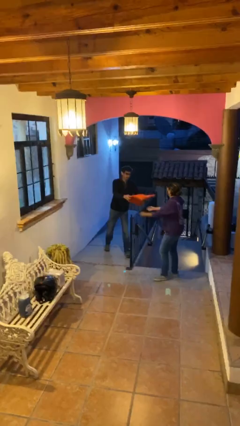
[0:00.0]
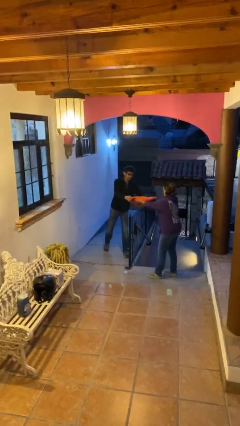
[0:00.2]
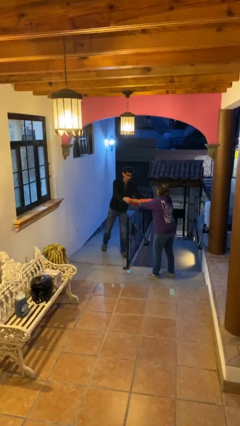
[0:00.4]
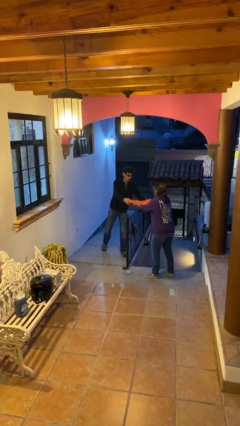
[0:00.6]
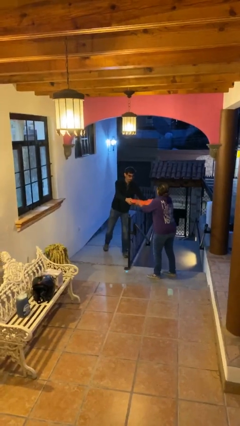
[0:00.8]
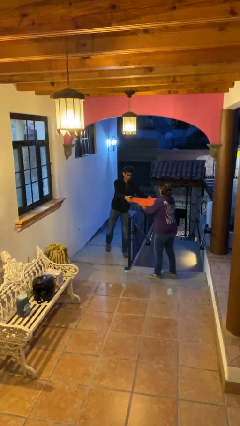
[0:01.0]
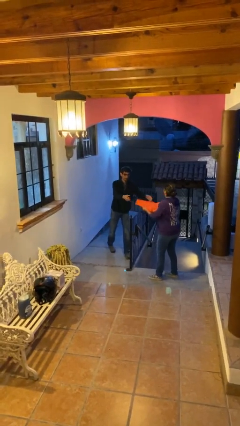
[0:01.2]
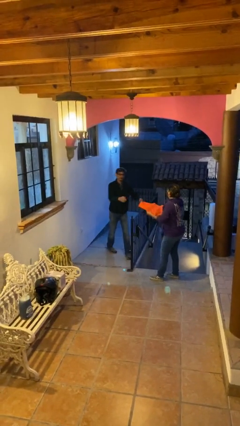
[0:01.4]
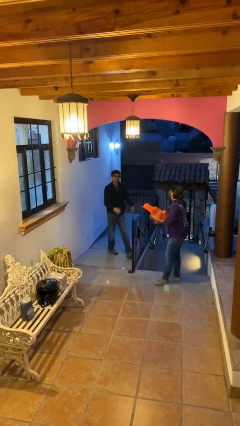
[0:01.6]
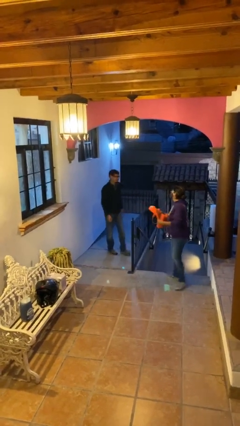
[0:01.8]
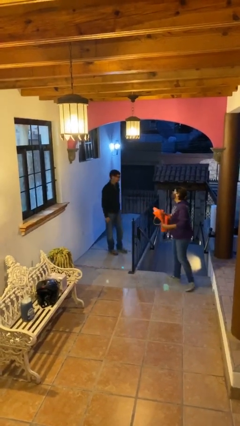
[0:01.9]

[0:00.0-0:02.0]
person transfers object to person

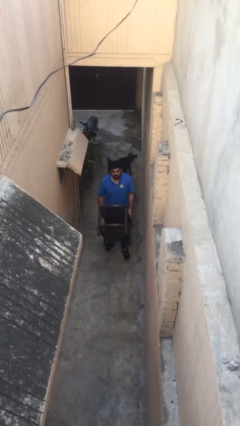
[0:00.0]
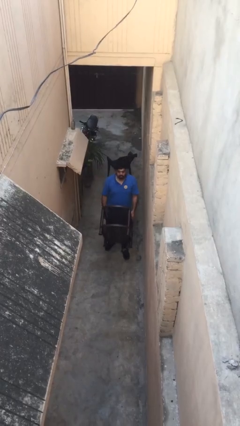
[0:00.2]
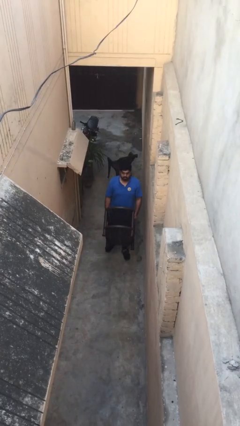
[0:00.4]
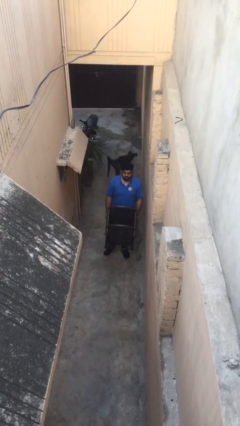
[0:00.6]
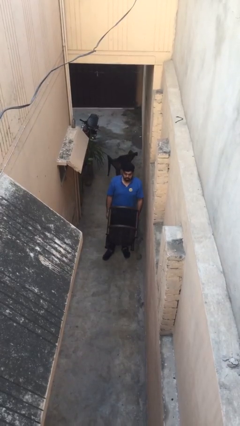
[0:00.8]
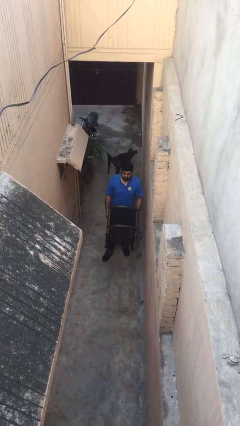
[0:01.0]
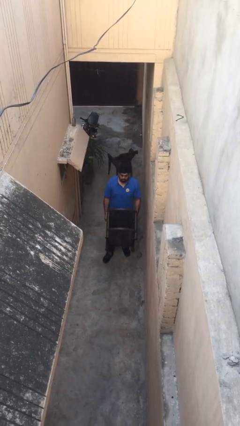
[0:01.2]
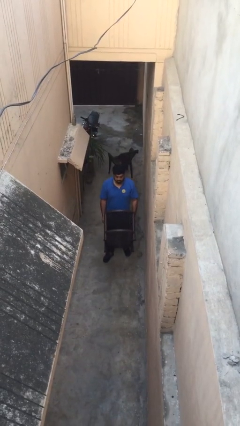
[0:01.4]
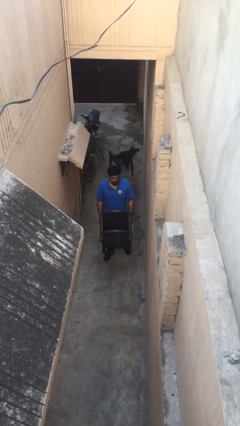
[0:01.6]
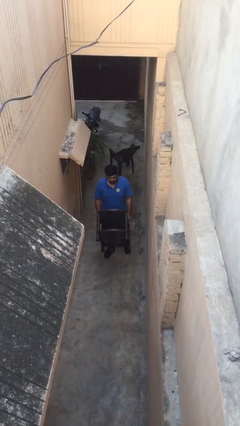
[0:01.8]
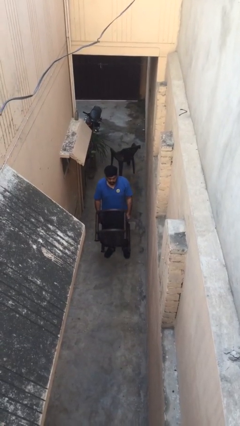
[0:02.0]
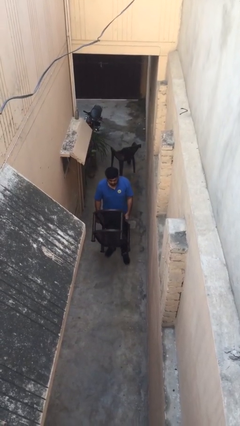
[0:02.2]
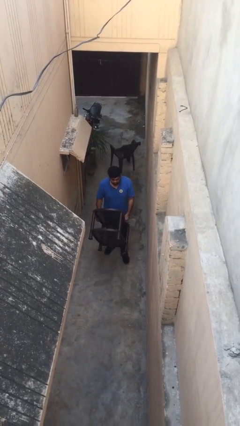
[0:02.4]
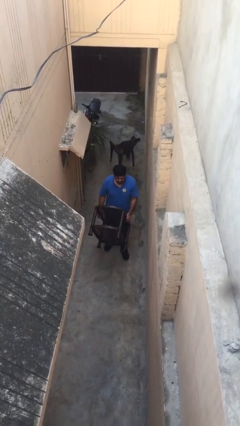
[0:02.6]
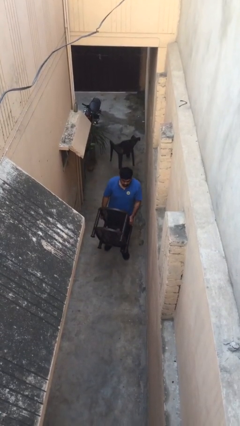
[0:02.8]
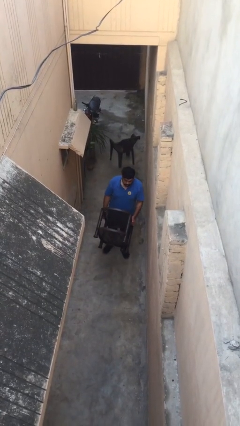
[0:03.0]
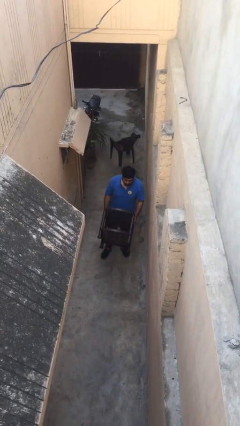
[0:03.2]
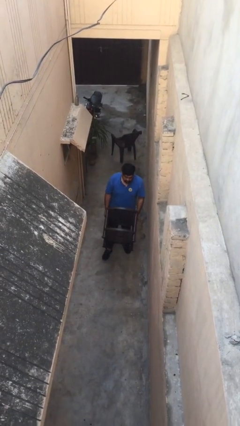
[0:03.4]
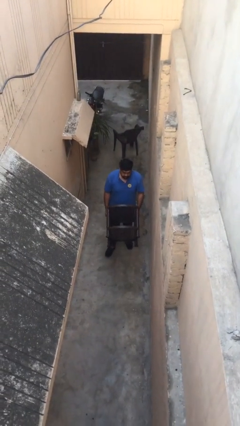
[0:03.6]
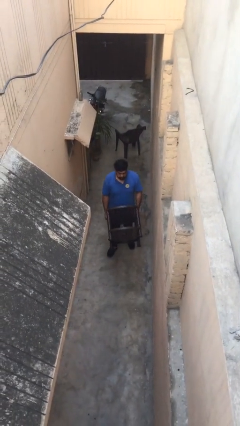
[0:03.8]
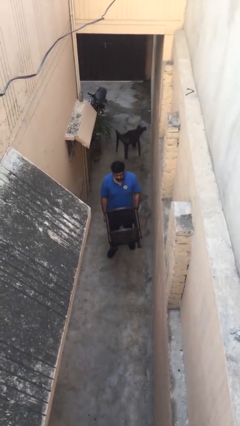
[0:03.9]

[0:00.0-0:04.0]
person carries heavy object

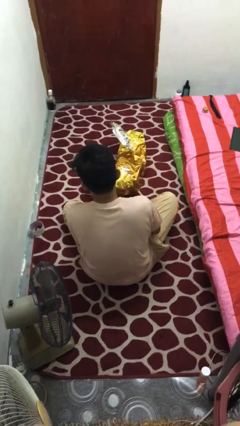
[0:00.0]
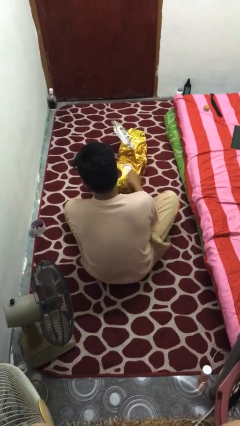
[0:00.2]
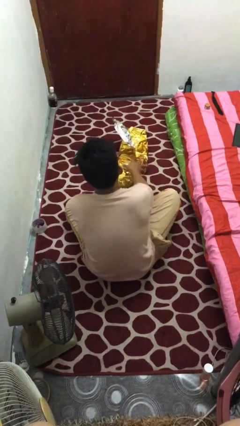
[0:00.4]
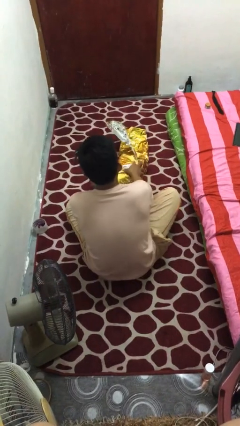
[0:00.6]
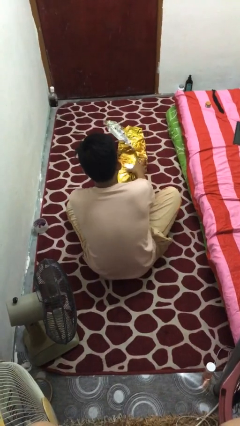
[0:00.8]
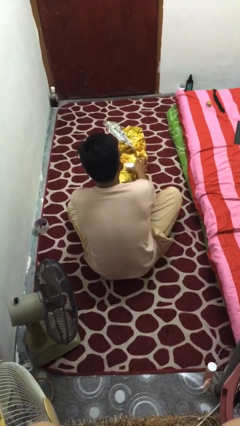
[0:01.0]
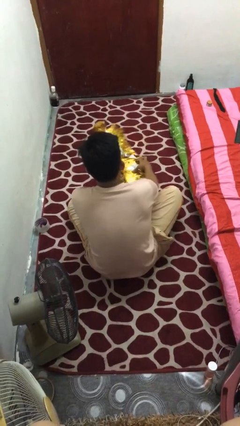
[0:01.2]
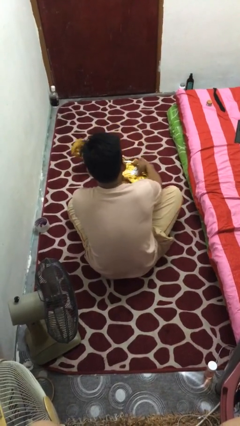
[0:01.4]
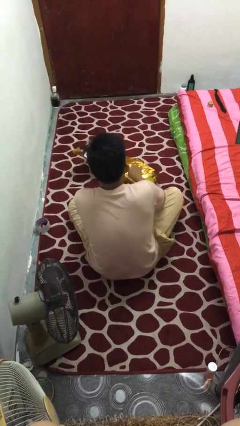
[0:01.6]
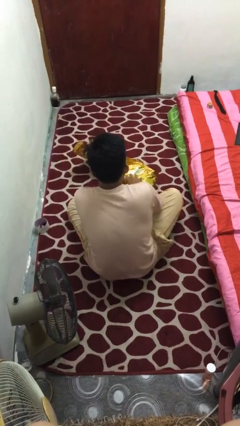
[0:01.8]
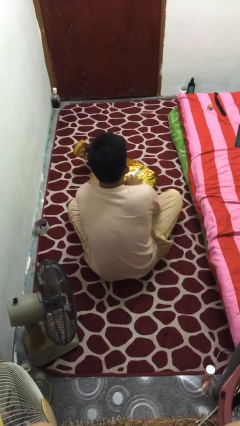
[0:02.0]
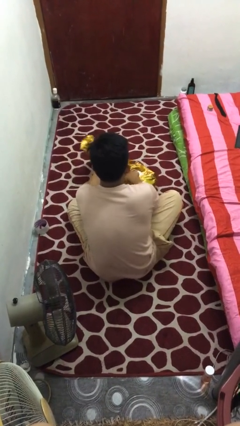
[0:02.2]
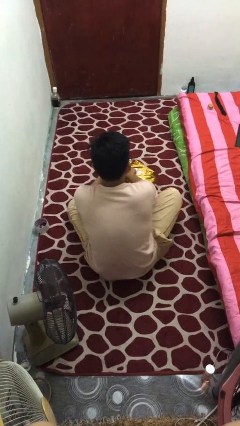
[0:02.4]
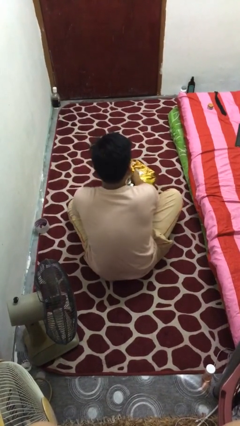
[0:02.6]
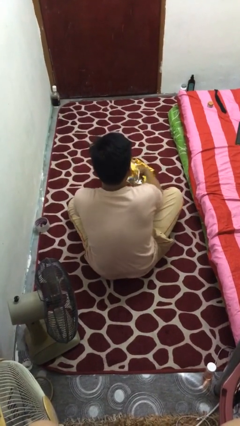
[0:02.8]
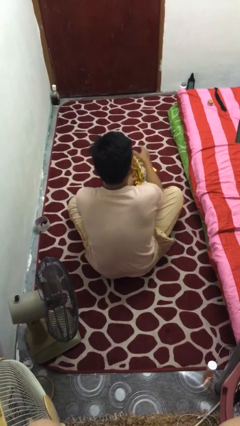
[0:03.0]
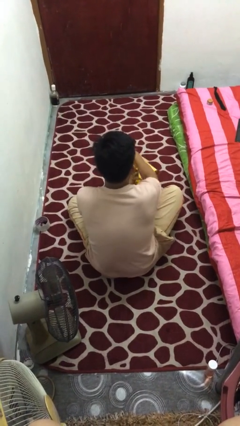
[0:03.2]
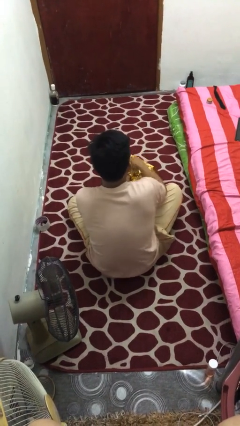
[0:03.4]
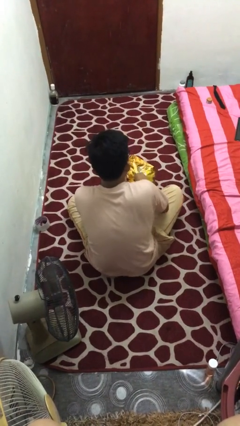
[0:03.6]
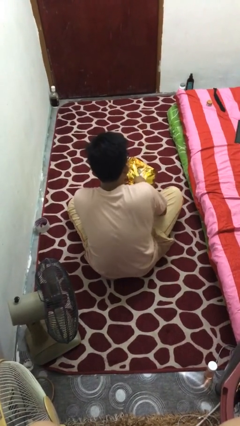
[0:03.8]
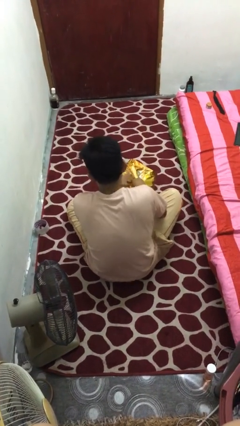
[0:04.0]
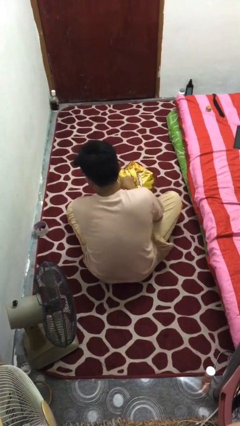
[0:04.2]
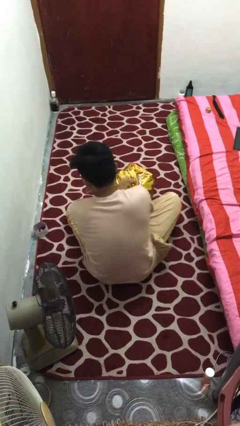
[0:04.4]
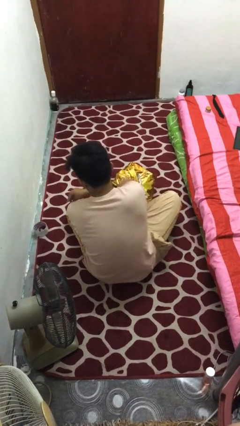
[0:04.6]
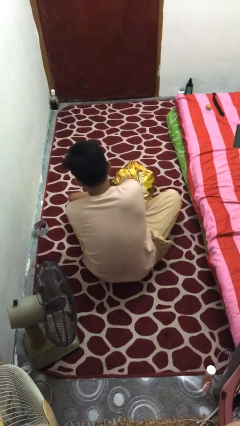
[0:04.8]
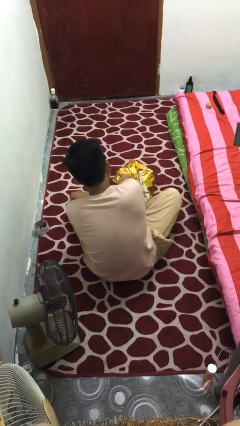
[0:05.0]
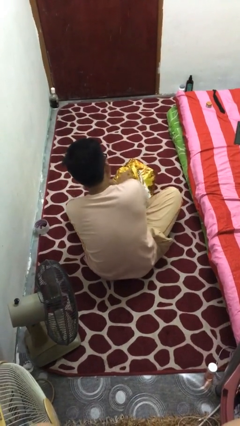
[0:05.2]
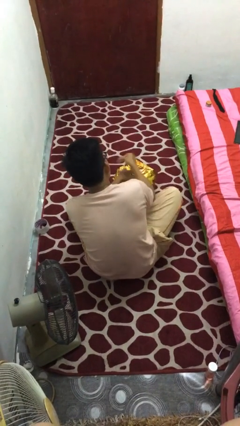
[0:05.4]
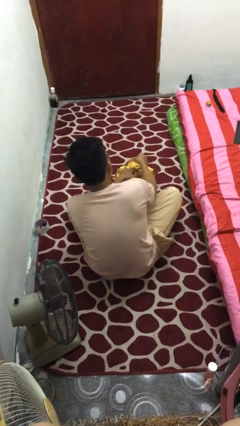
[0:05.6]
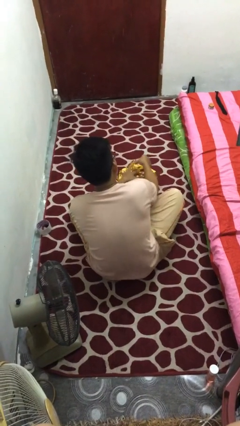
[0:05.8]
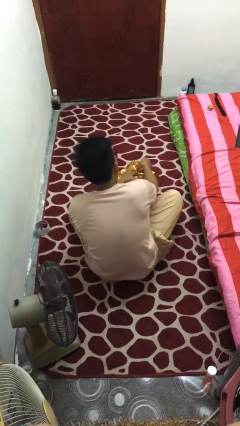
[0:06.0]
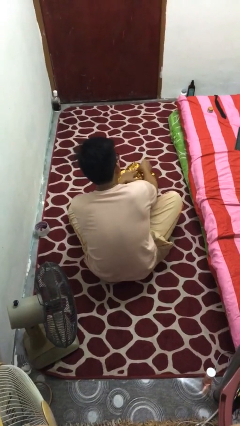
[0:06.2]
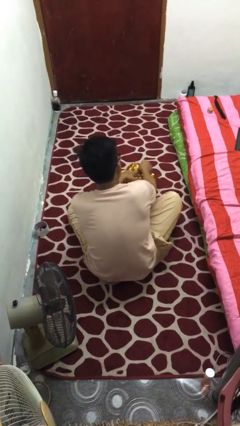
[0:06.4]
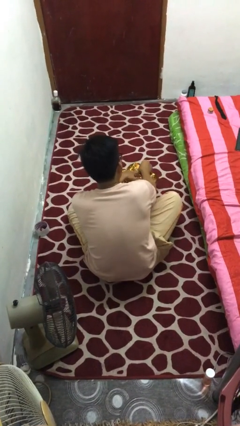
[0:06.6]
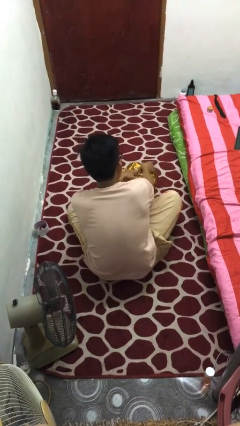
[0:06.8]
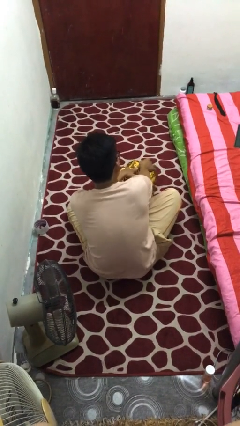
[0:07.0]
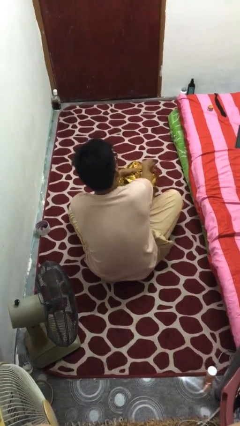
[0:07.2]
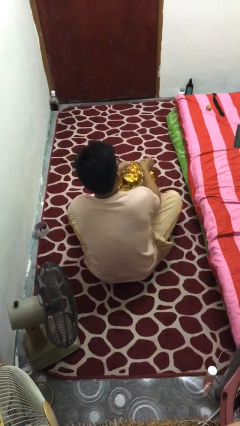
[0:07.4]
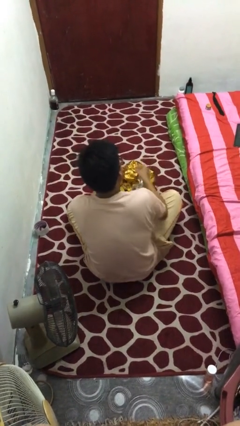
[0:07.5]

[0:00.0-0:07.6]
person wraps box

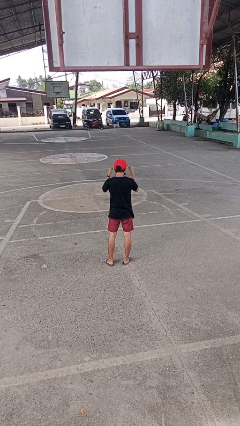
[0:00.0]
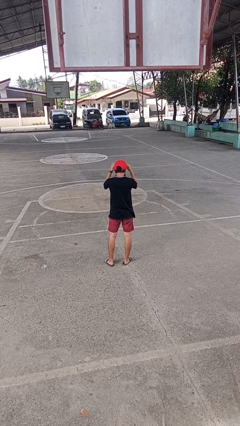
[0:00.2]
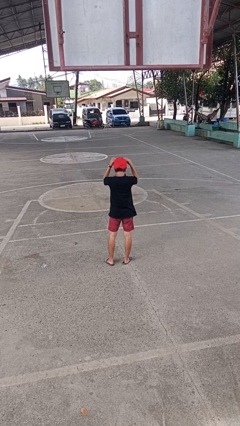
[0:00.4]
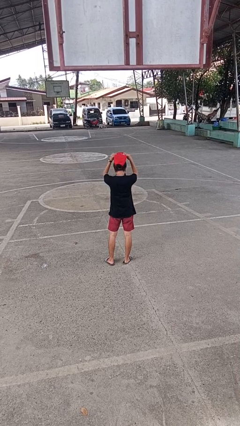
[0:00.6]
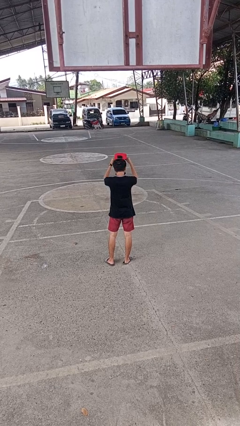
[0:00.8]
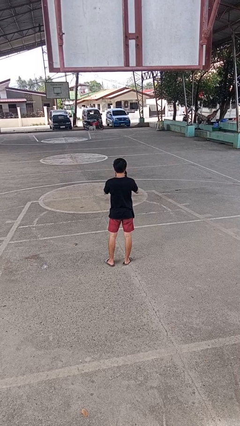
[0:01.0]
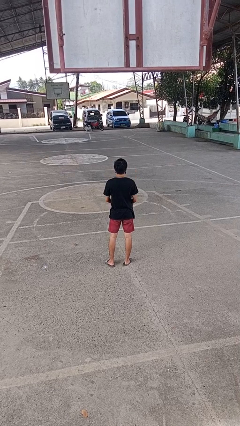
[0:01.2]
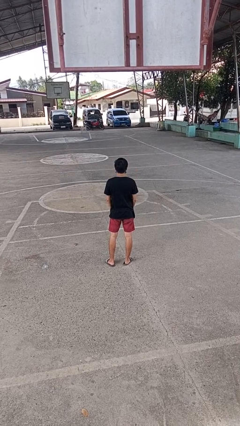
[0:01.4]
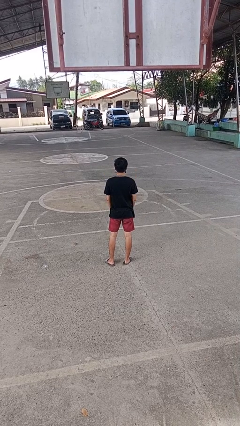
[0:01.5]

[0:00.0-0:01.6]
person takes off hat

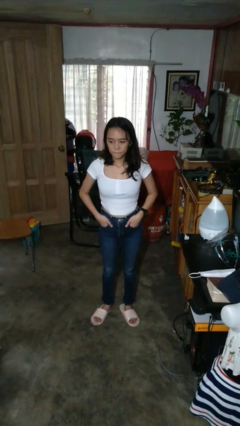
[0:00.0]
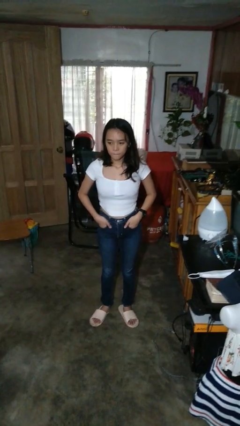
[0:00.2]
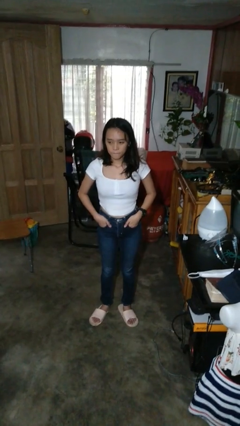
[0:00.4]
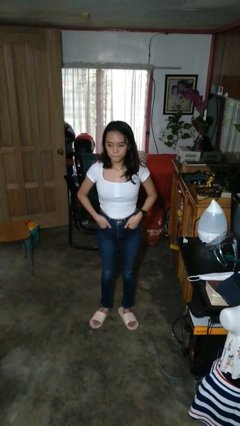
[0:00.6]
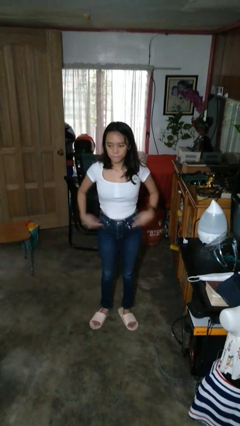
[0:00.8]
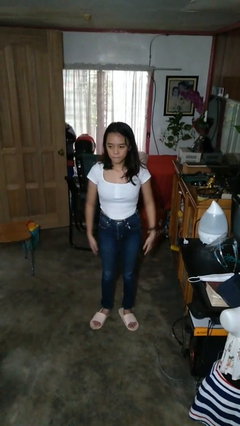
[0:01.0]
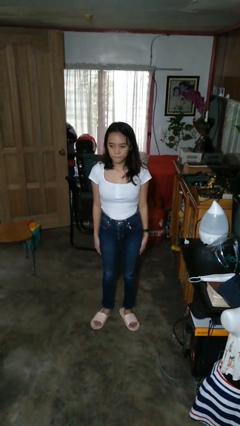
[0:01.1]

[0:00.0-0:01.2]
person puts hands in back pockets

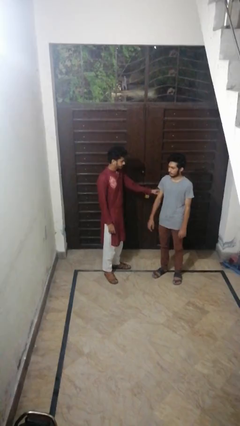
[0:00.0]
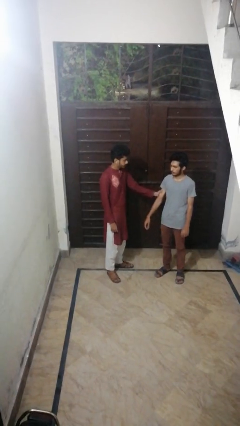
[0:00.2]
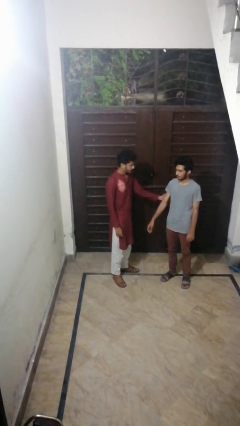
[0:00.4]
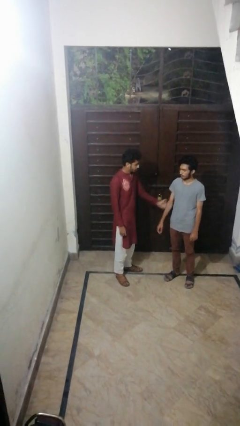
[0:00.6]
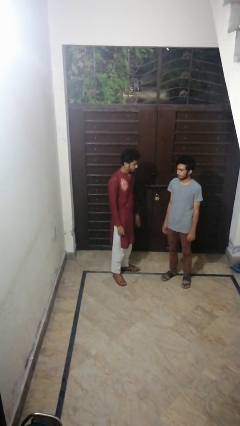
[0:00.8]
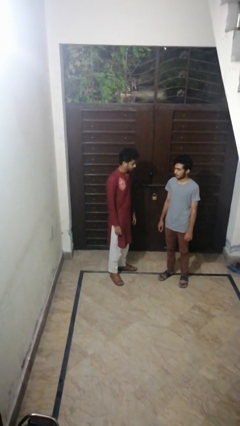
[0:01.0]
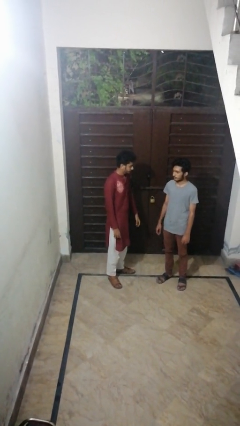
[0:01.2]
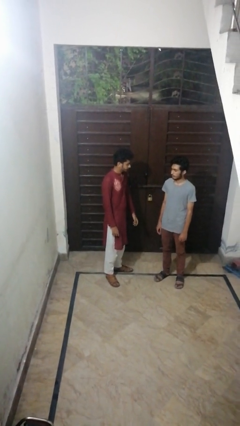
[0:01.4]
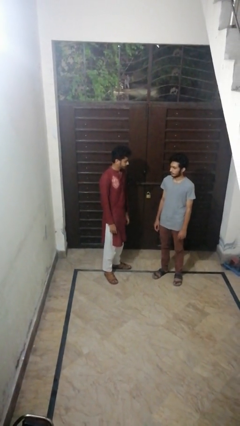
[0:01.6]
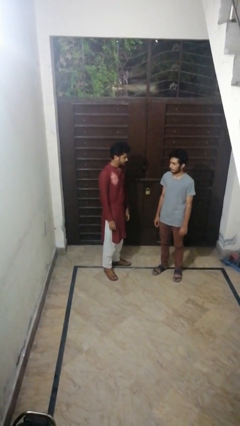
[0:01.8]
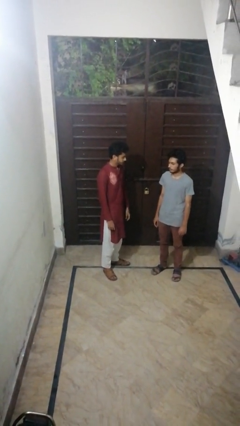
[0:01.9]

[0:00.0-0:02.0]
person grabs person by bicep
